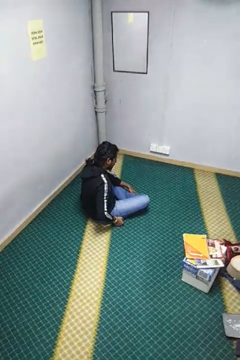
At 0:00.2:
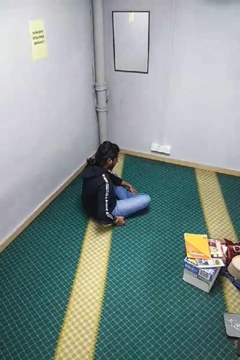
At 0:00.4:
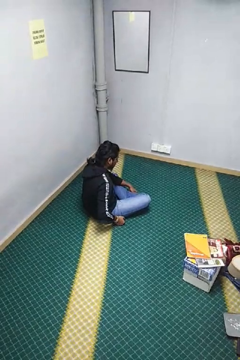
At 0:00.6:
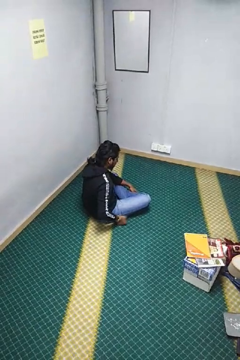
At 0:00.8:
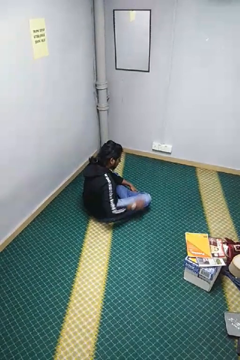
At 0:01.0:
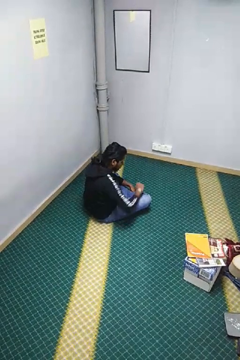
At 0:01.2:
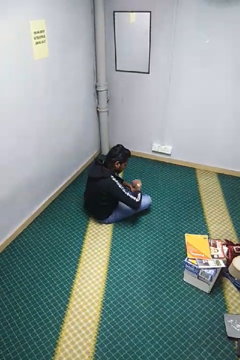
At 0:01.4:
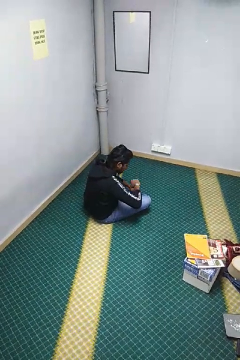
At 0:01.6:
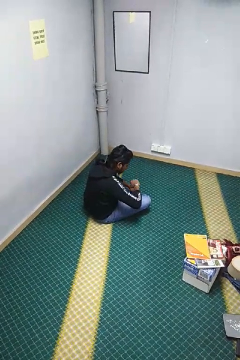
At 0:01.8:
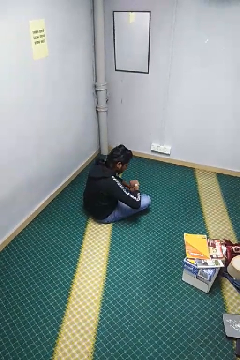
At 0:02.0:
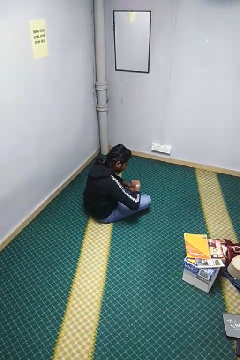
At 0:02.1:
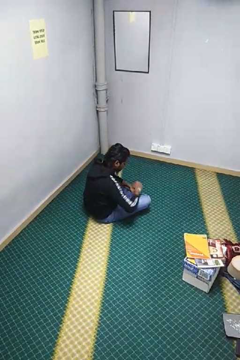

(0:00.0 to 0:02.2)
person looks at wristwatch

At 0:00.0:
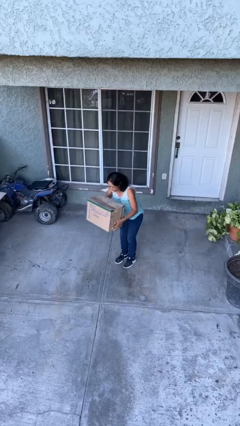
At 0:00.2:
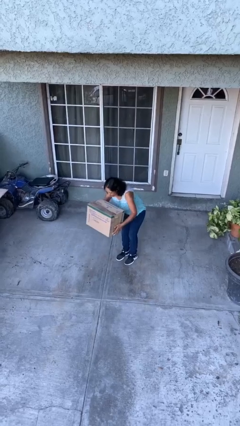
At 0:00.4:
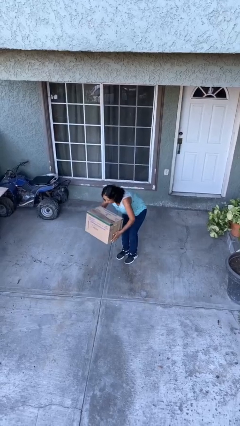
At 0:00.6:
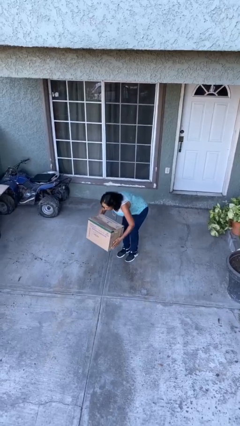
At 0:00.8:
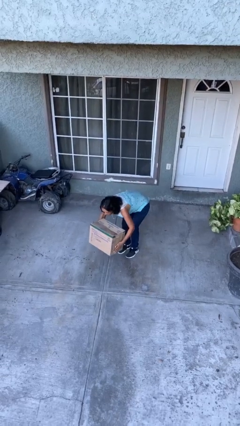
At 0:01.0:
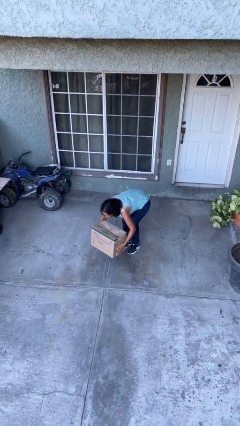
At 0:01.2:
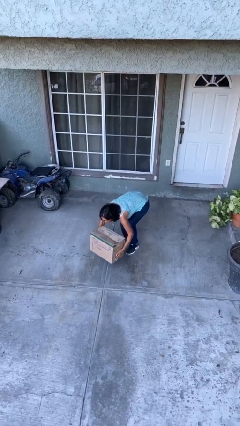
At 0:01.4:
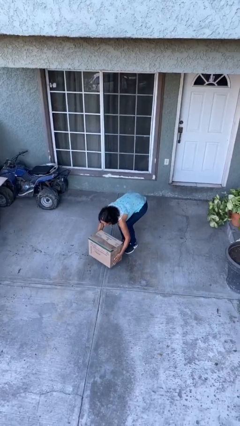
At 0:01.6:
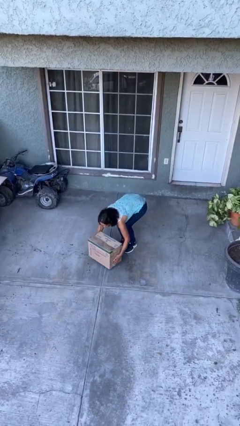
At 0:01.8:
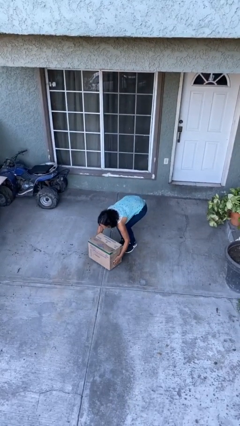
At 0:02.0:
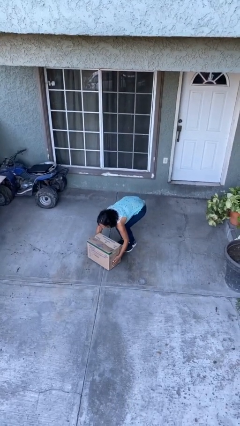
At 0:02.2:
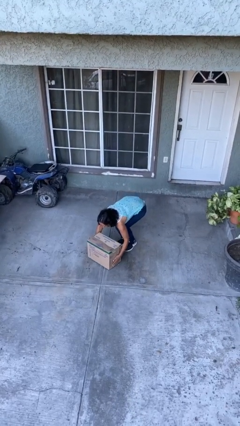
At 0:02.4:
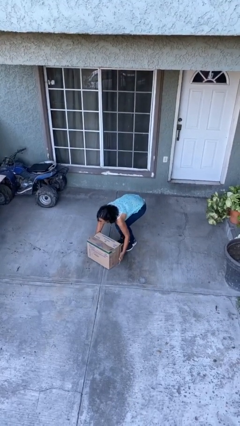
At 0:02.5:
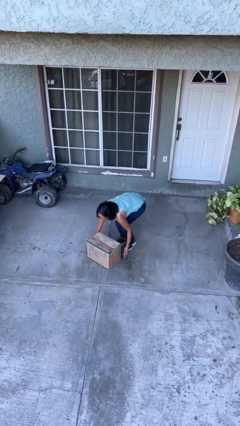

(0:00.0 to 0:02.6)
person puts down object on floor

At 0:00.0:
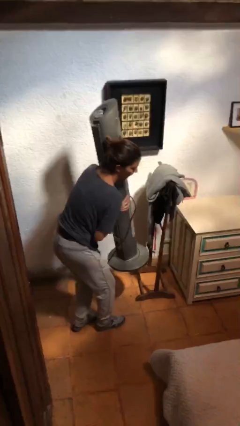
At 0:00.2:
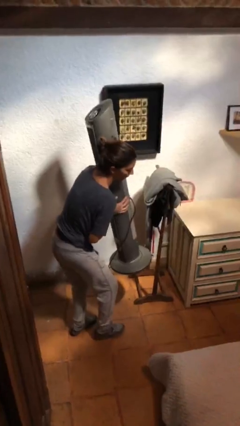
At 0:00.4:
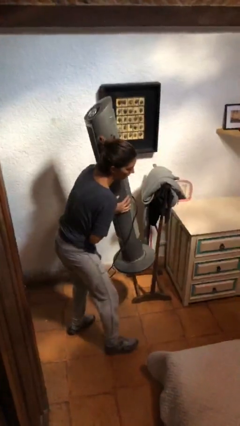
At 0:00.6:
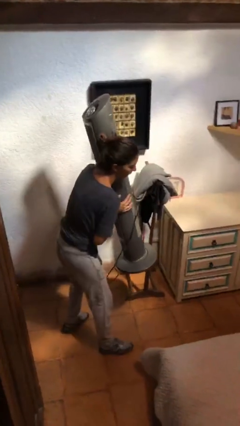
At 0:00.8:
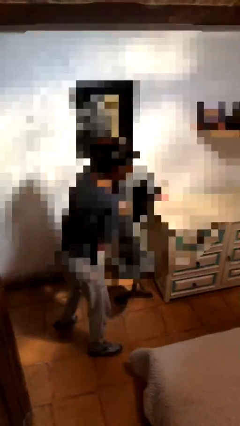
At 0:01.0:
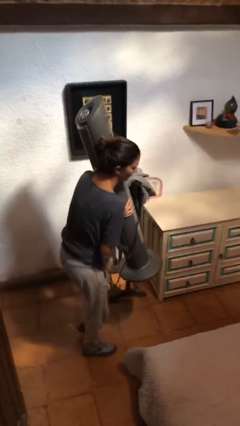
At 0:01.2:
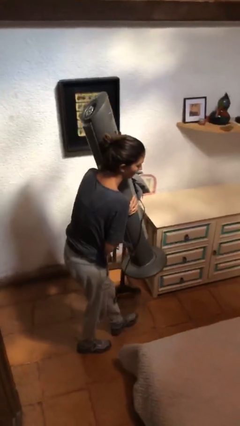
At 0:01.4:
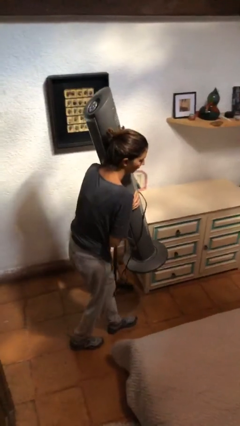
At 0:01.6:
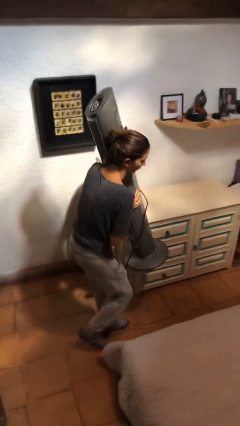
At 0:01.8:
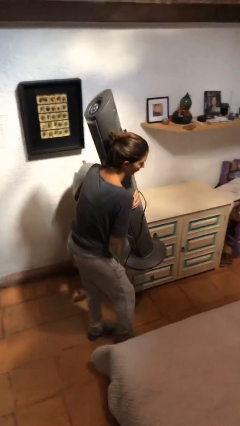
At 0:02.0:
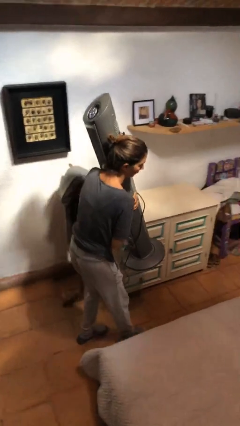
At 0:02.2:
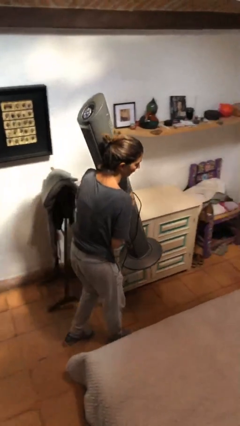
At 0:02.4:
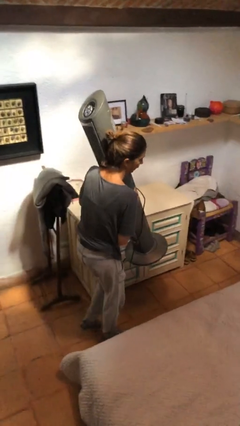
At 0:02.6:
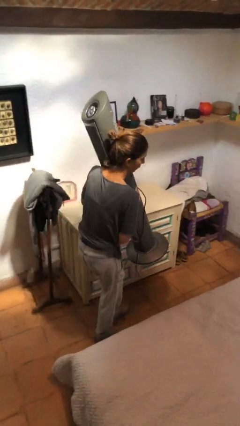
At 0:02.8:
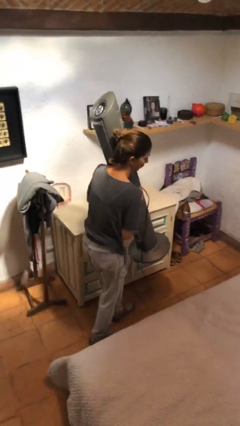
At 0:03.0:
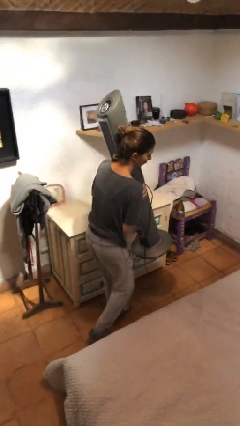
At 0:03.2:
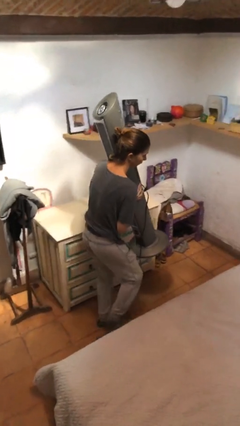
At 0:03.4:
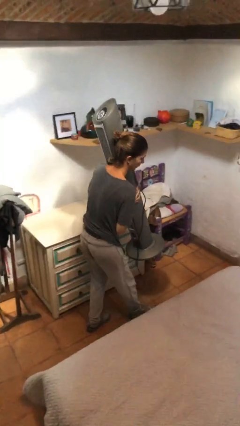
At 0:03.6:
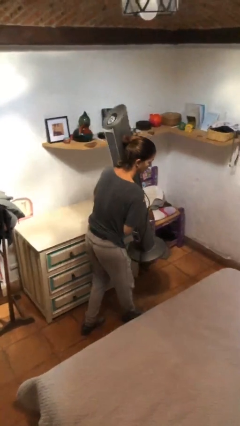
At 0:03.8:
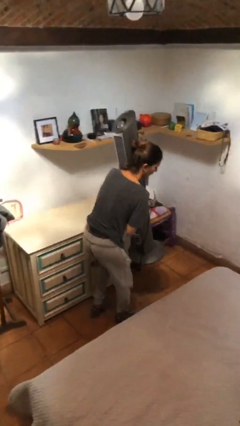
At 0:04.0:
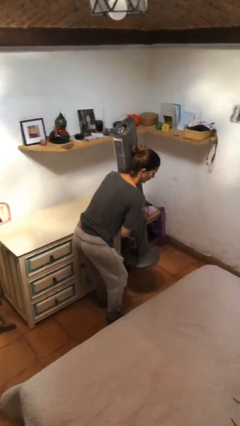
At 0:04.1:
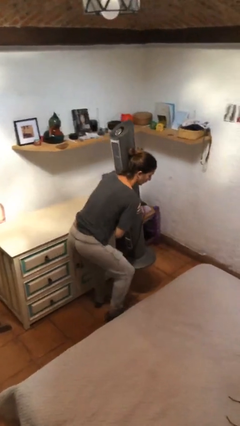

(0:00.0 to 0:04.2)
person carries heavy object

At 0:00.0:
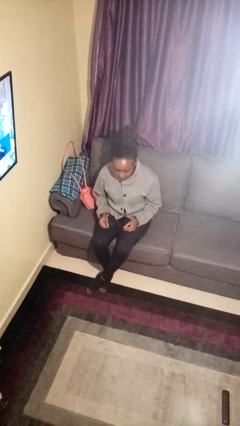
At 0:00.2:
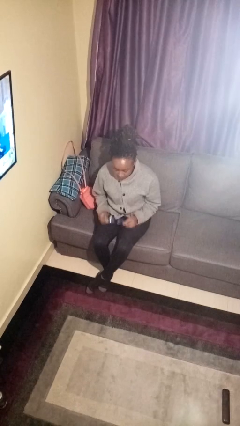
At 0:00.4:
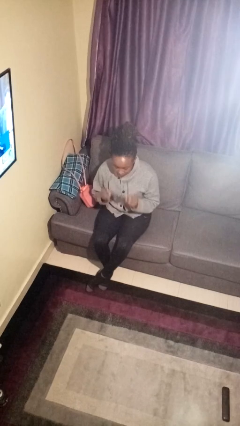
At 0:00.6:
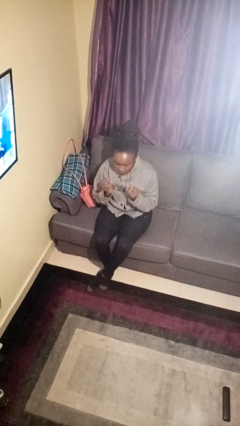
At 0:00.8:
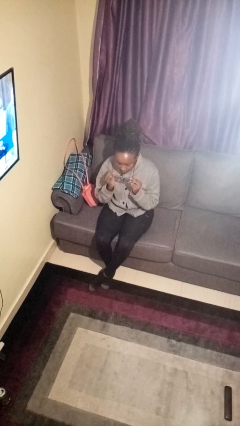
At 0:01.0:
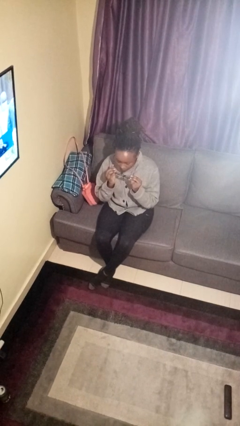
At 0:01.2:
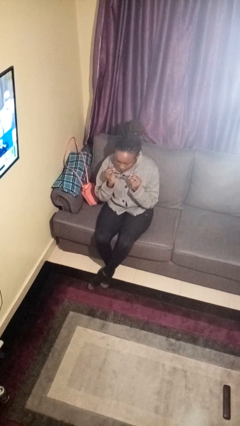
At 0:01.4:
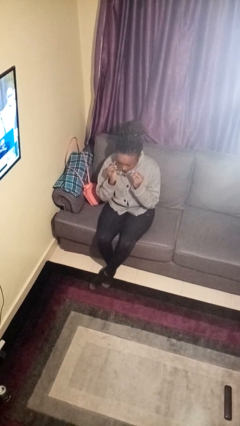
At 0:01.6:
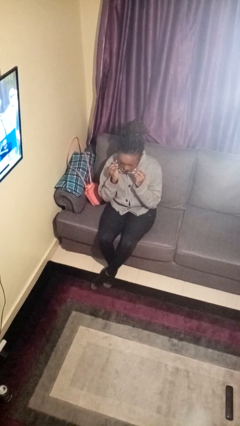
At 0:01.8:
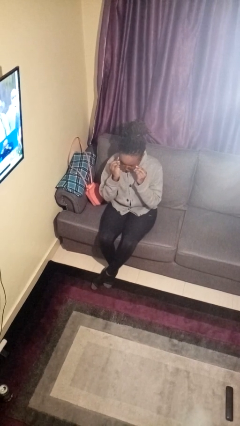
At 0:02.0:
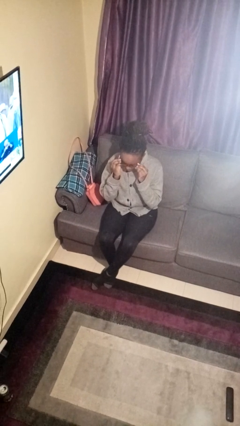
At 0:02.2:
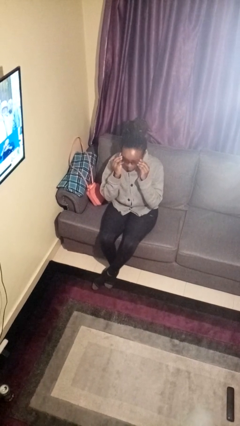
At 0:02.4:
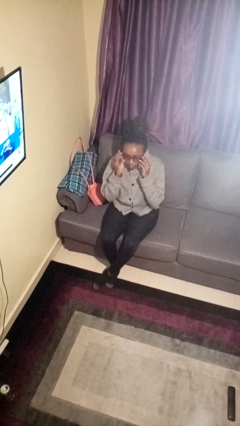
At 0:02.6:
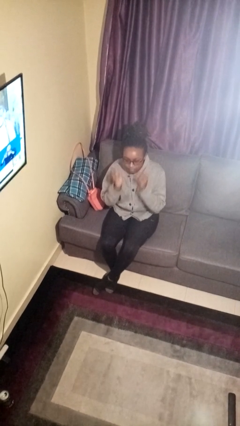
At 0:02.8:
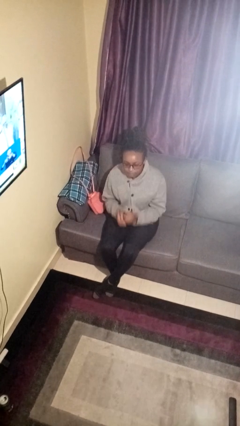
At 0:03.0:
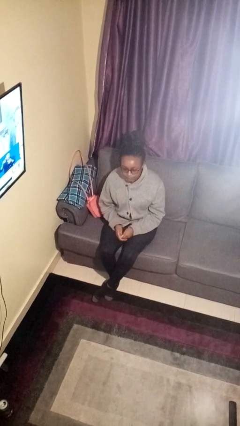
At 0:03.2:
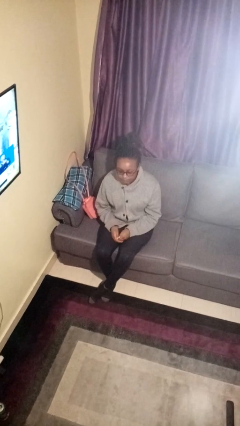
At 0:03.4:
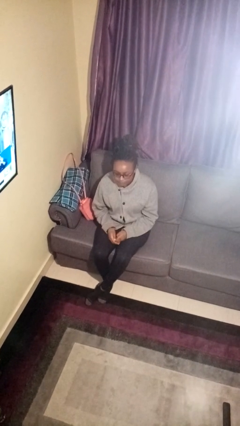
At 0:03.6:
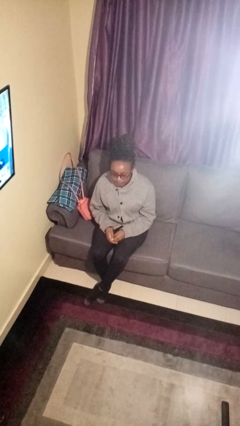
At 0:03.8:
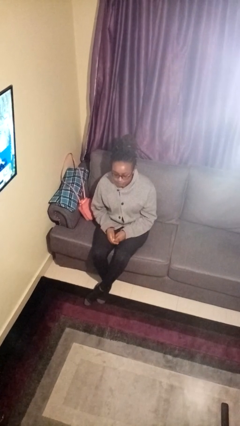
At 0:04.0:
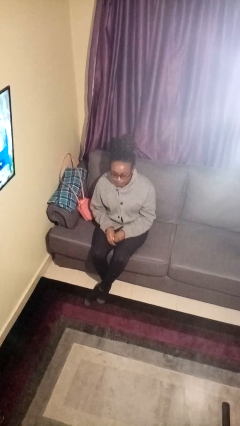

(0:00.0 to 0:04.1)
person puts on glasses

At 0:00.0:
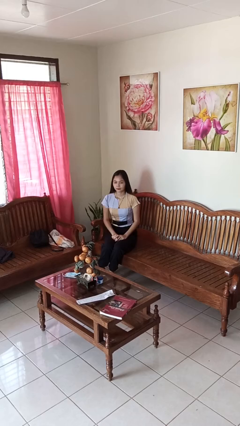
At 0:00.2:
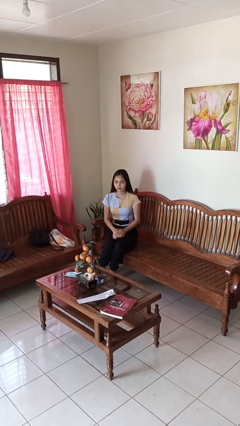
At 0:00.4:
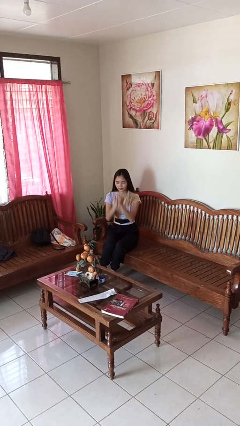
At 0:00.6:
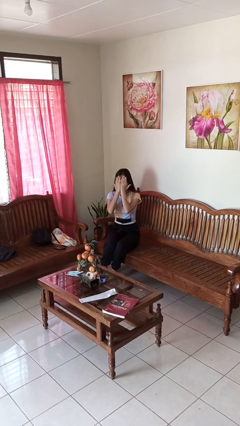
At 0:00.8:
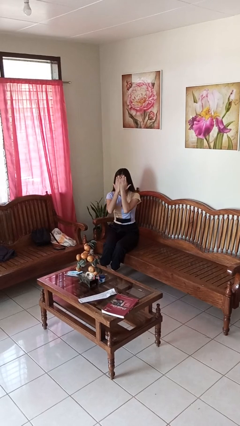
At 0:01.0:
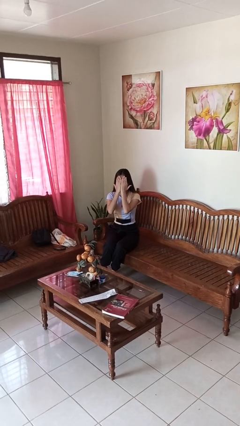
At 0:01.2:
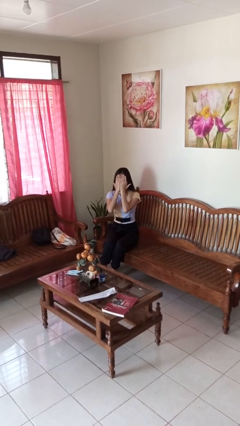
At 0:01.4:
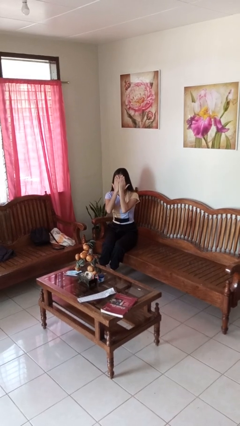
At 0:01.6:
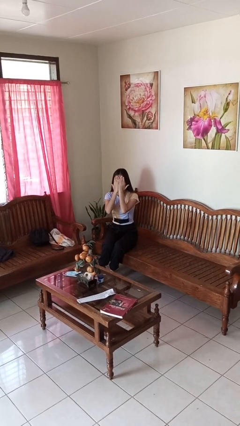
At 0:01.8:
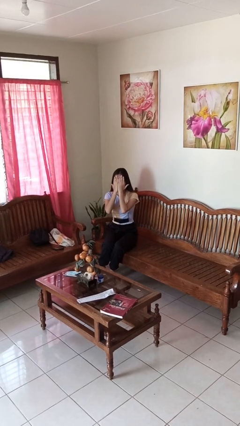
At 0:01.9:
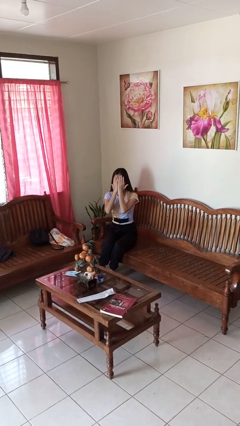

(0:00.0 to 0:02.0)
person covers face with hands

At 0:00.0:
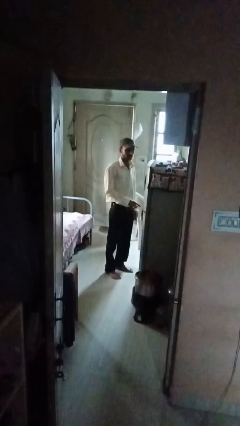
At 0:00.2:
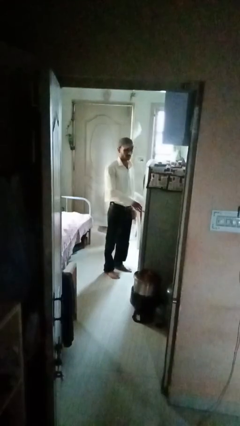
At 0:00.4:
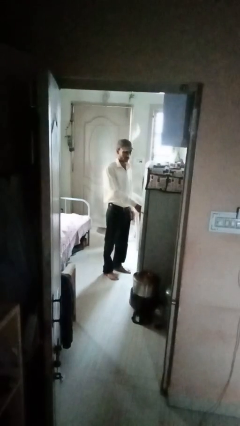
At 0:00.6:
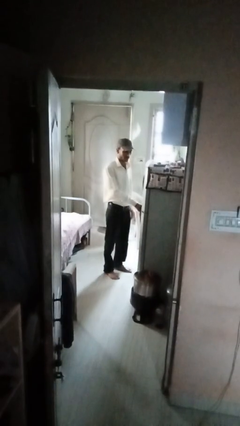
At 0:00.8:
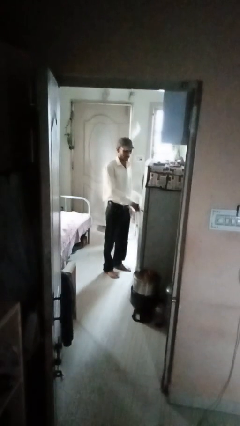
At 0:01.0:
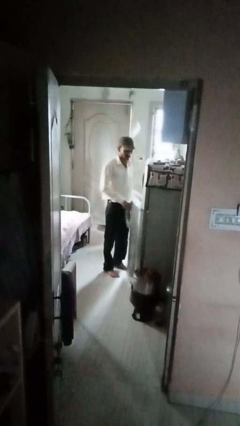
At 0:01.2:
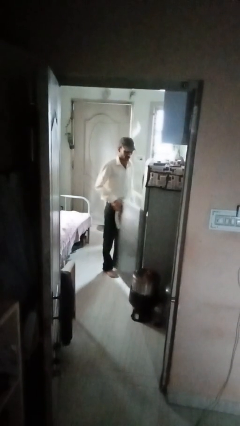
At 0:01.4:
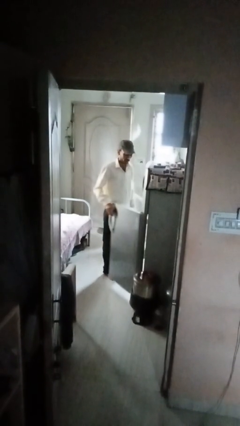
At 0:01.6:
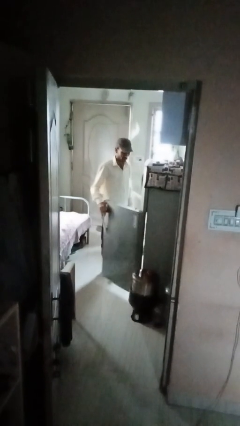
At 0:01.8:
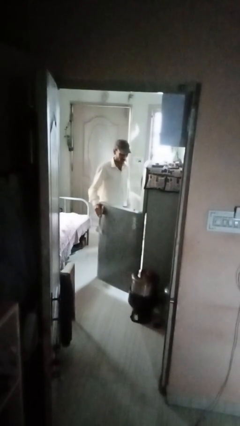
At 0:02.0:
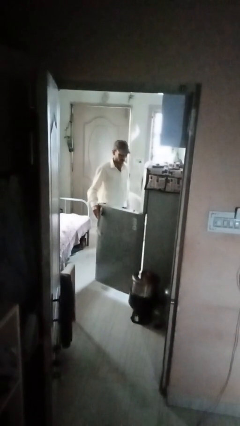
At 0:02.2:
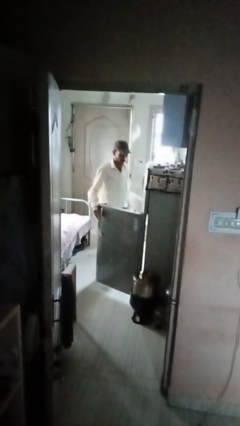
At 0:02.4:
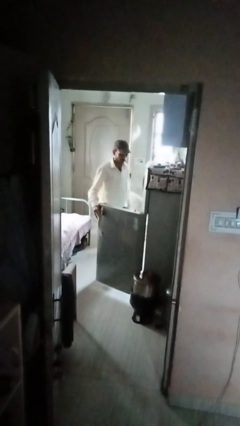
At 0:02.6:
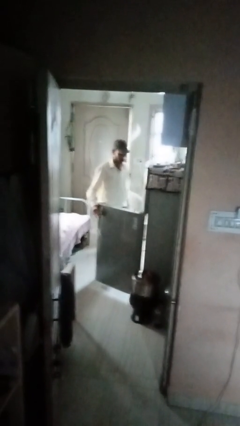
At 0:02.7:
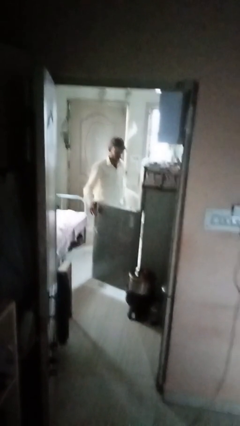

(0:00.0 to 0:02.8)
person opens refrigerator
